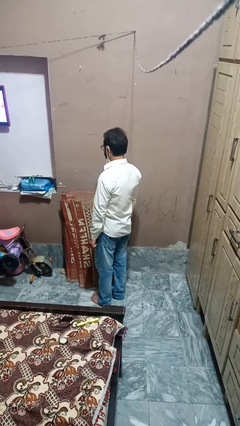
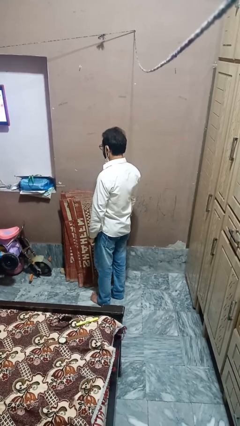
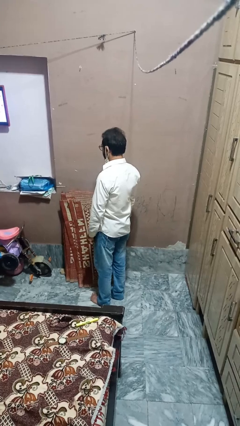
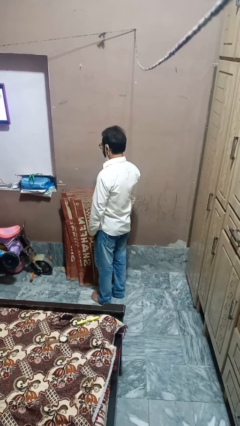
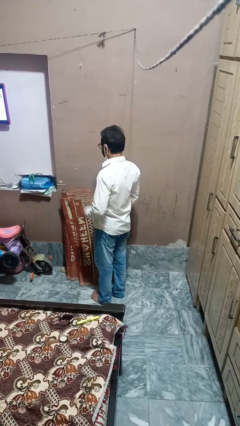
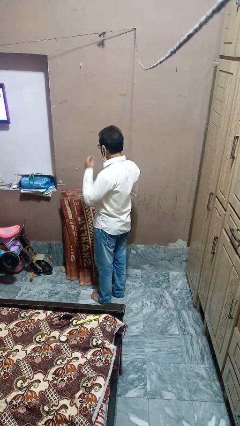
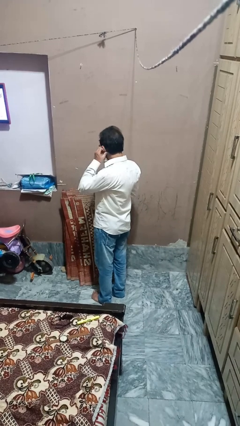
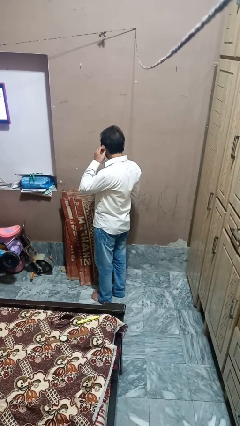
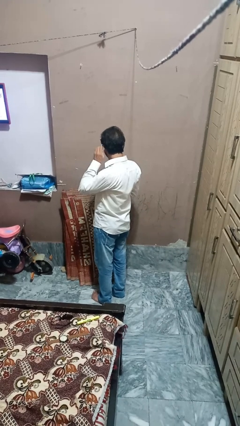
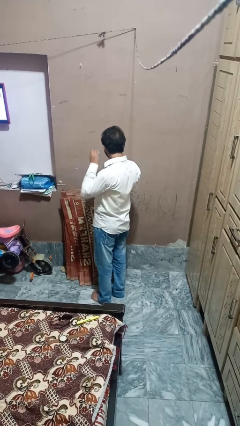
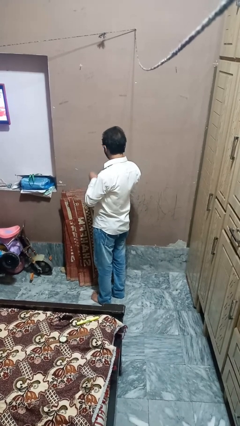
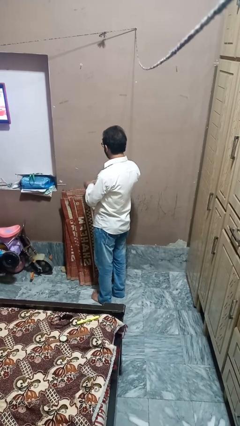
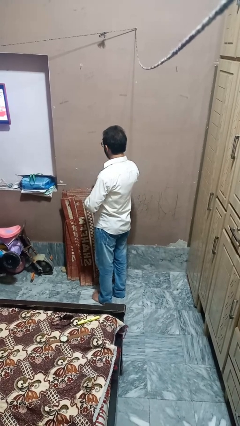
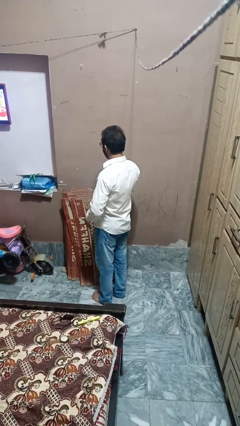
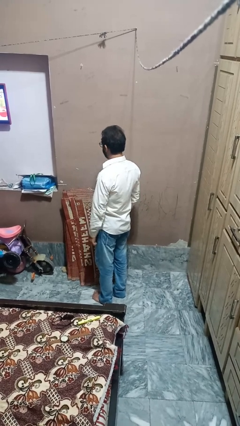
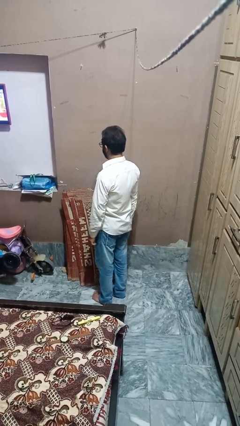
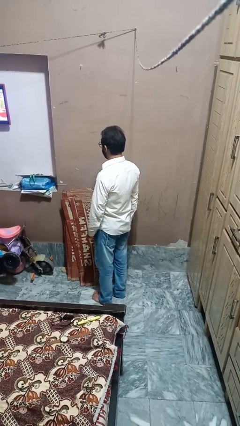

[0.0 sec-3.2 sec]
person takes off earrings

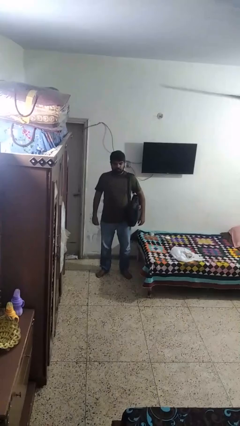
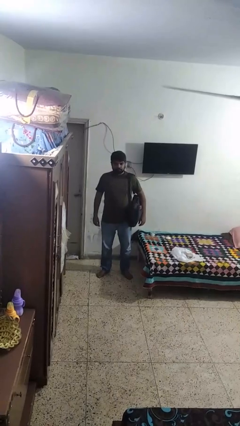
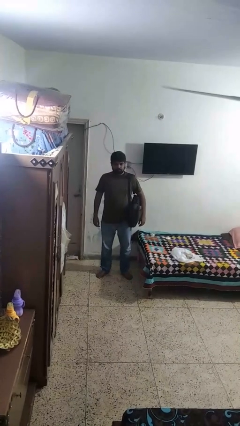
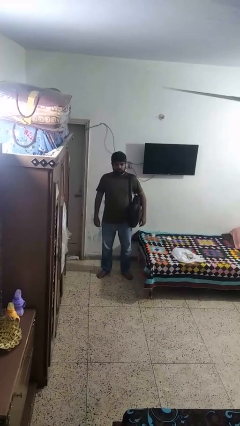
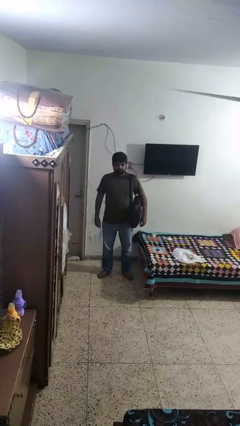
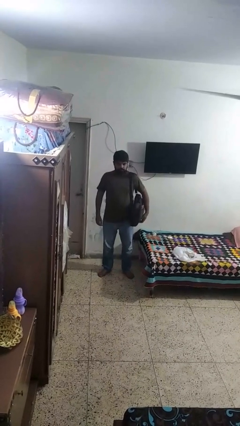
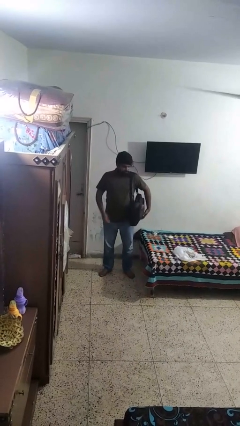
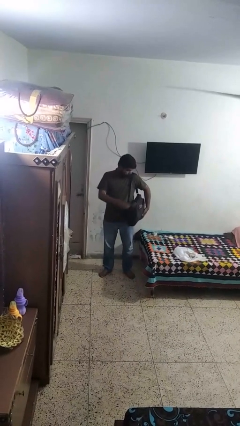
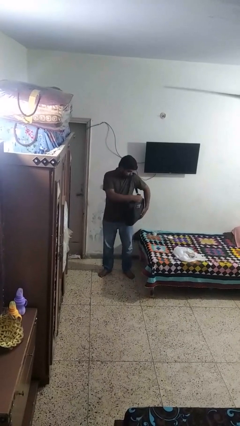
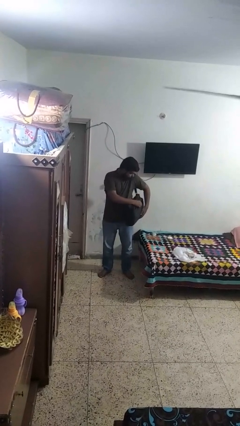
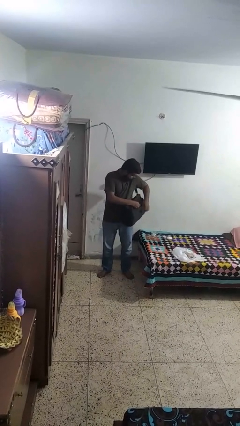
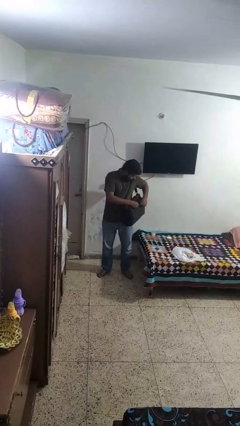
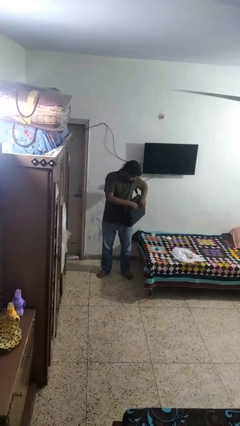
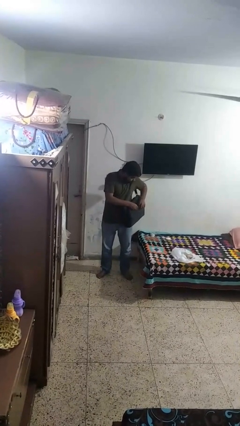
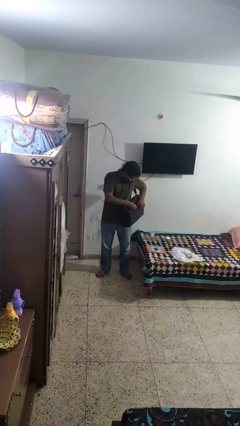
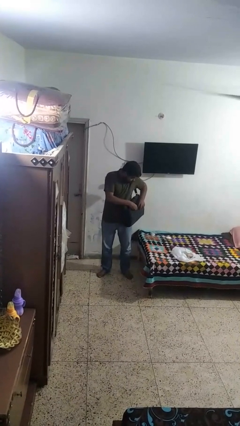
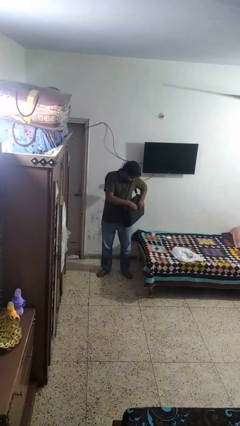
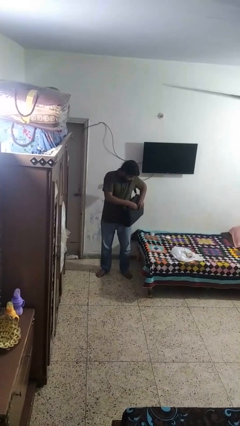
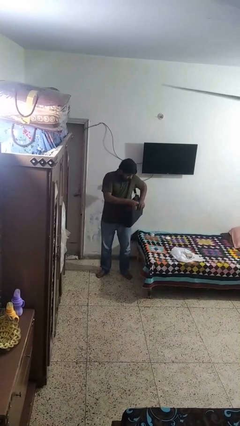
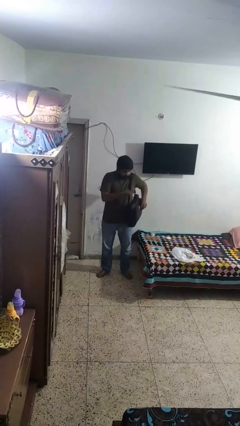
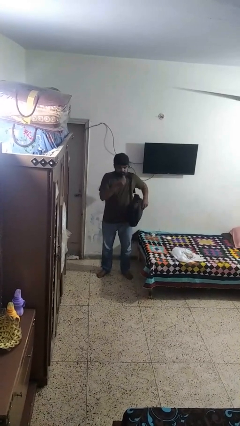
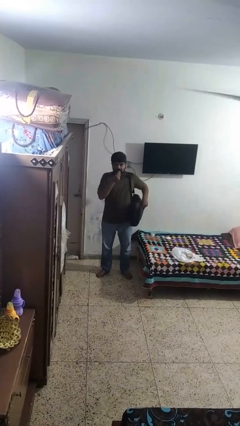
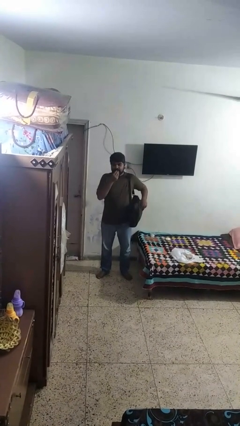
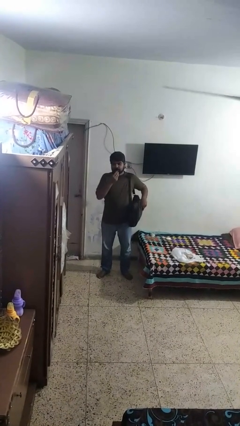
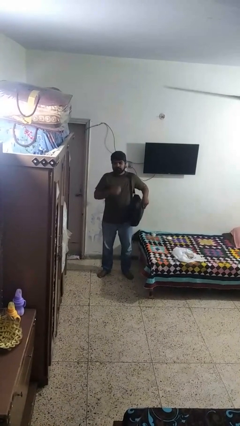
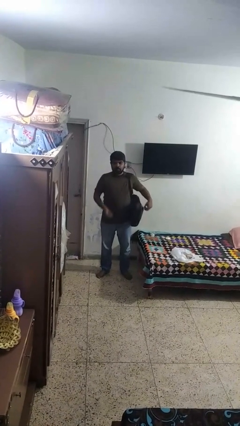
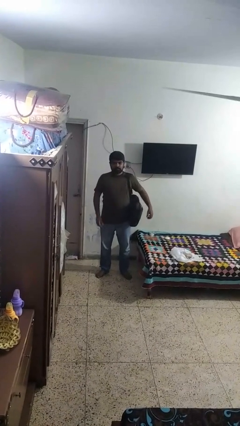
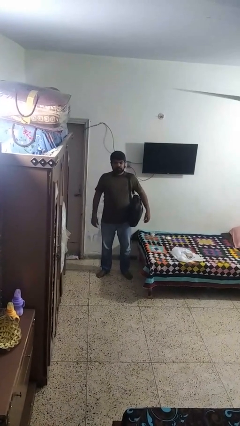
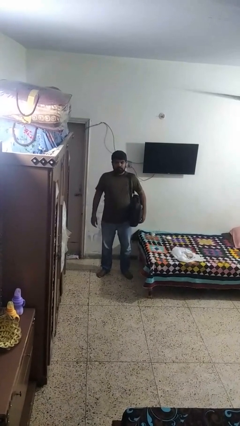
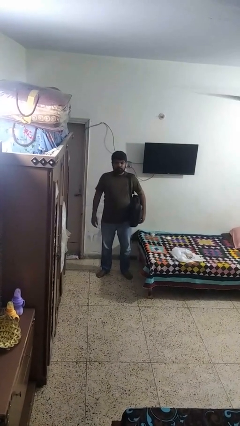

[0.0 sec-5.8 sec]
person eats snack from bag

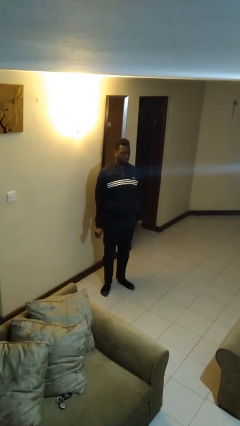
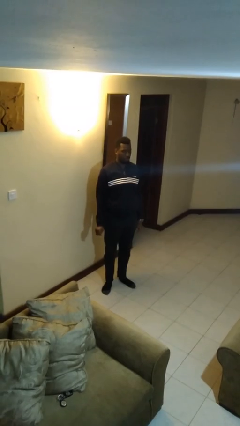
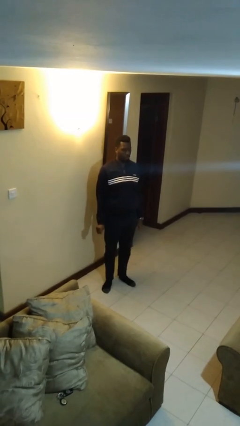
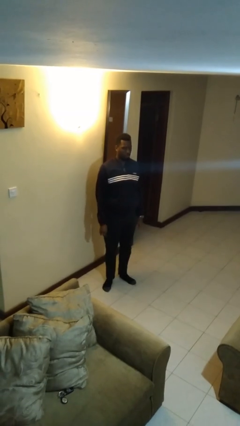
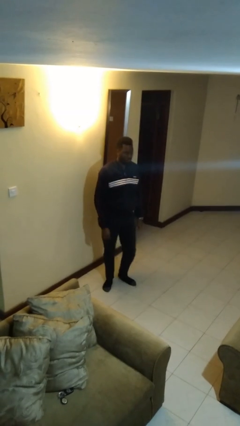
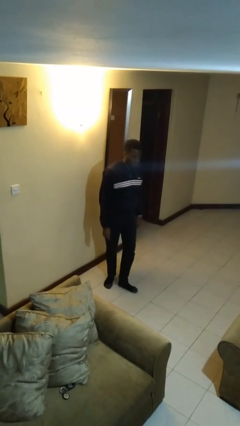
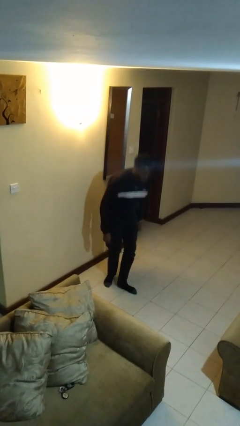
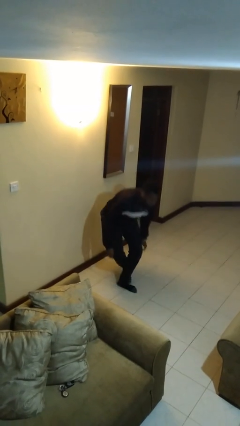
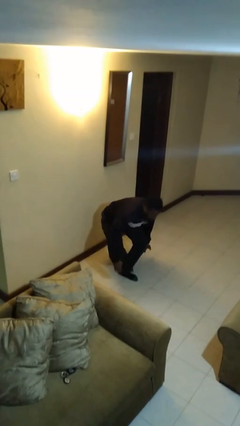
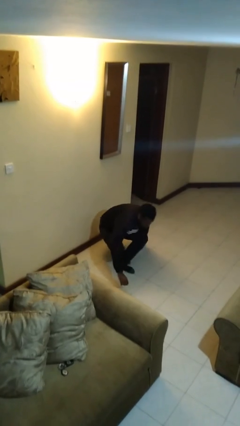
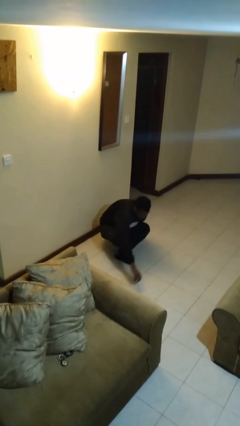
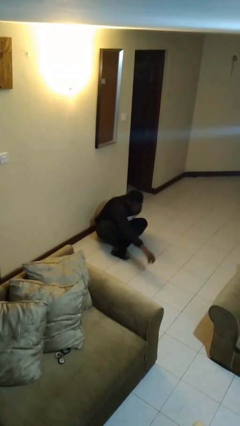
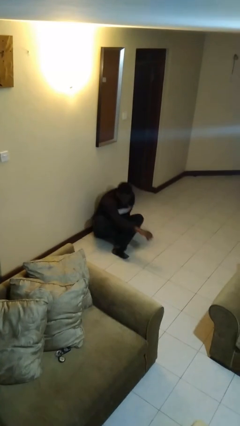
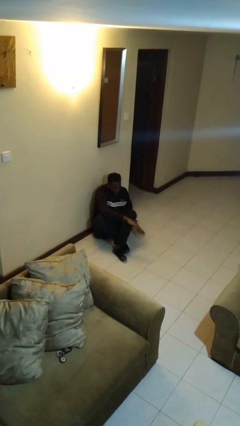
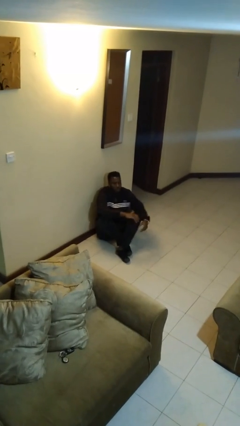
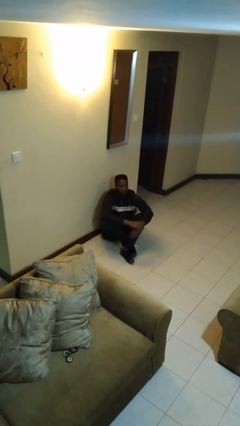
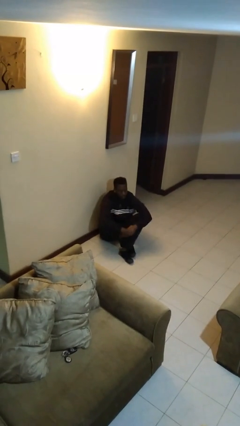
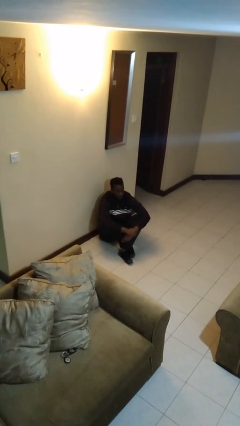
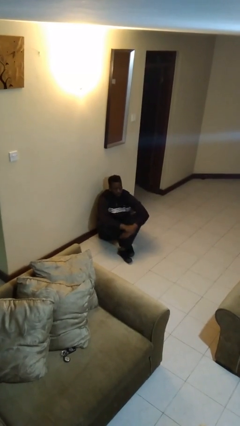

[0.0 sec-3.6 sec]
person sits crisscross

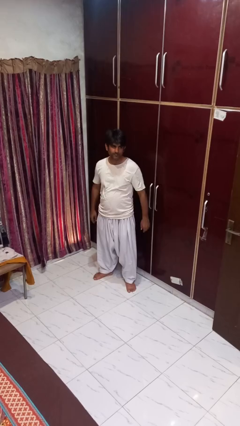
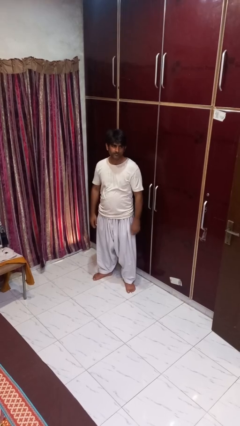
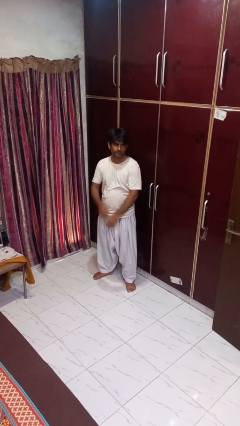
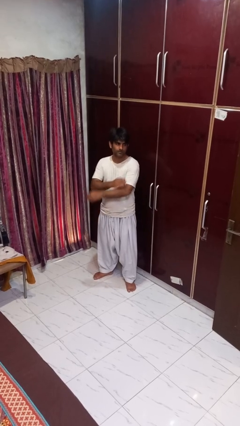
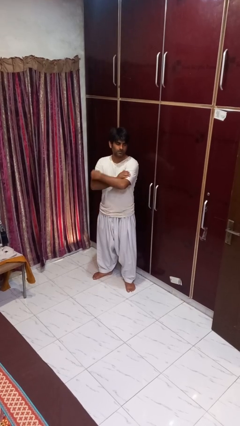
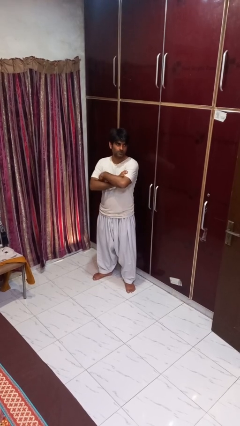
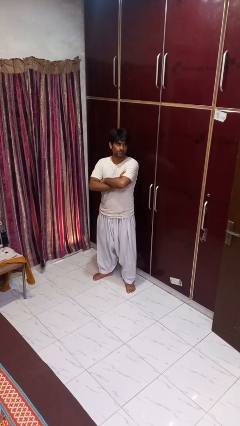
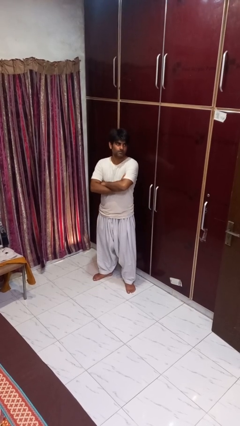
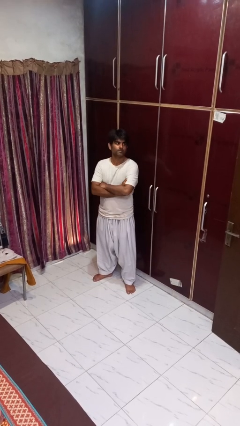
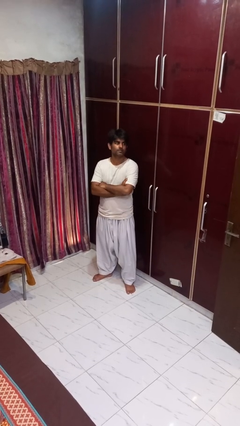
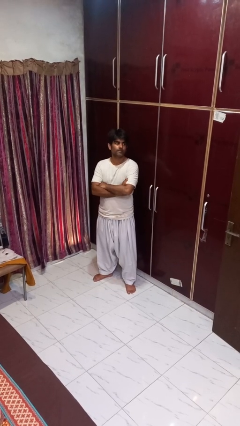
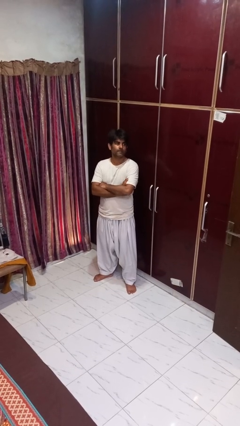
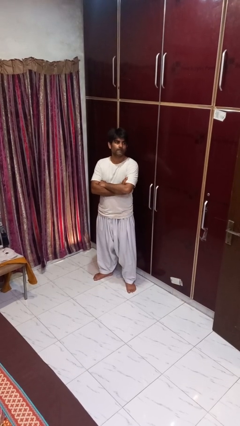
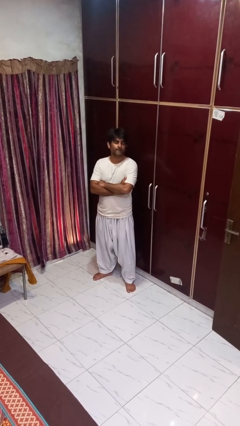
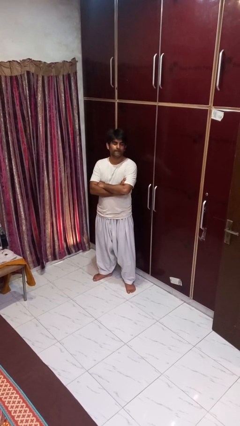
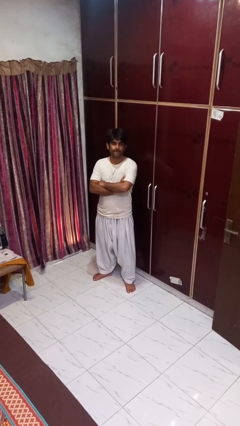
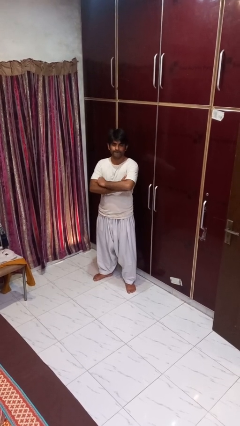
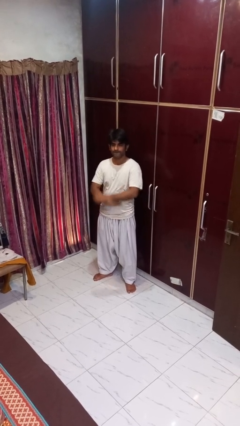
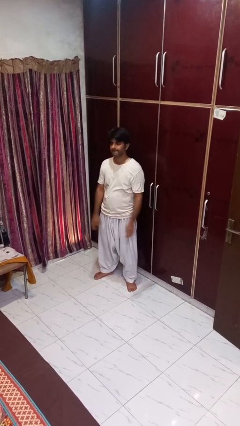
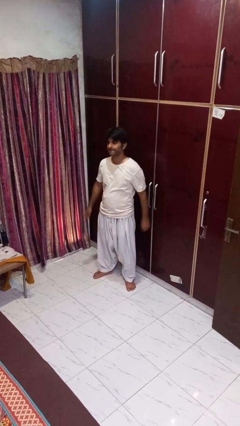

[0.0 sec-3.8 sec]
person crosses arms

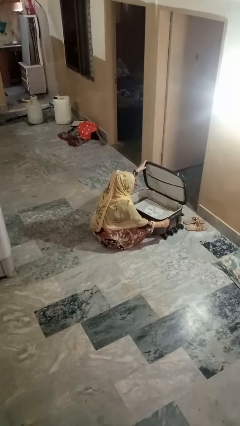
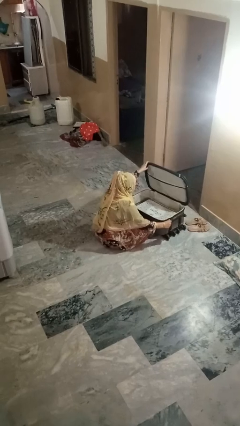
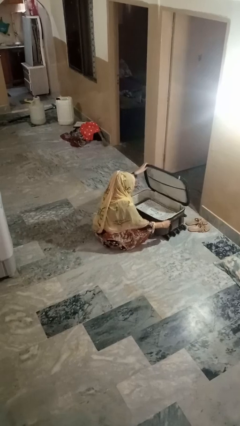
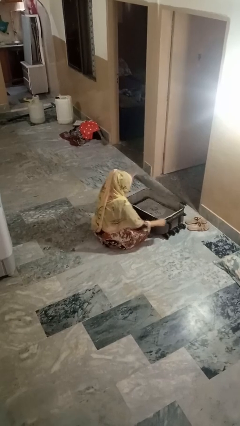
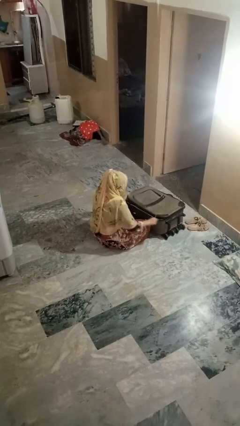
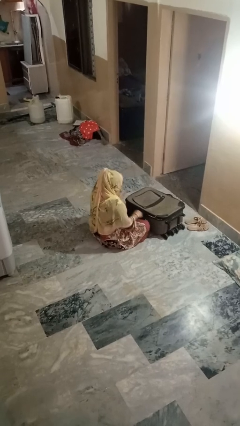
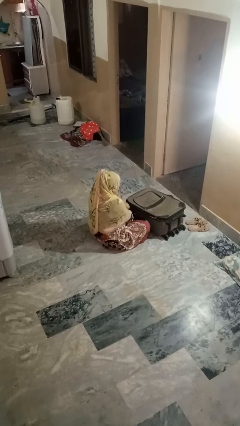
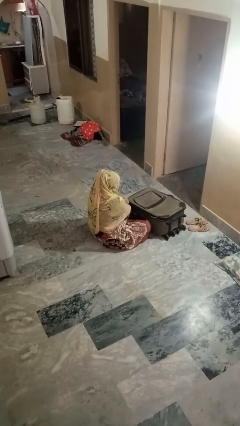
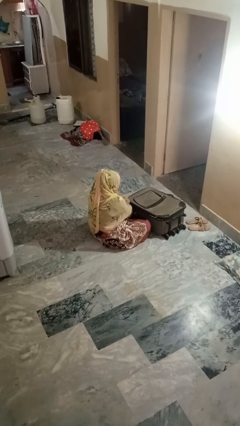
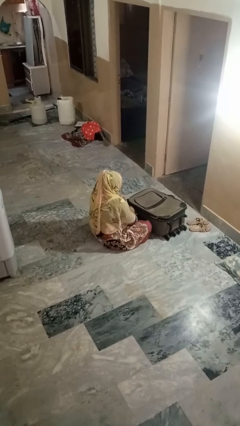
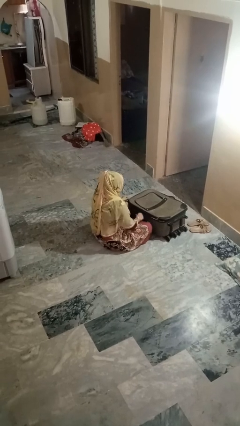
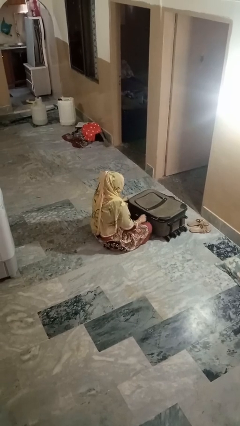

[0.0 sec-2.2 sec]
person closes suitcase
